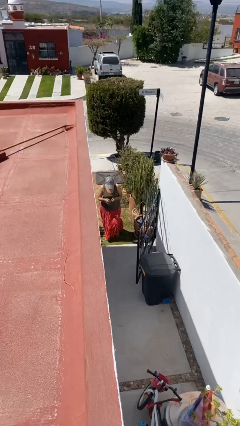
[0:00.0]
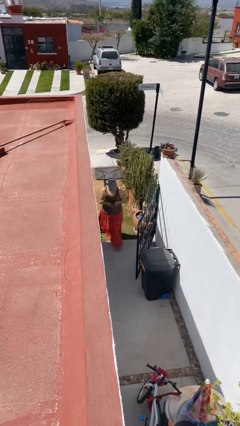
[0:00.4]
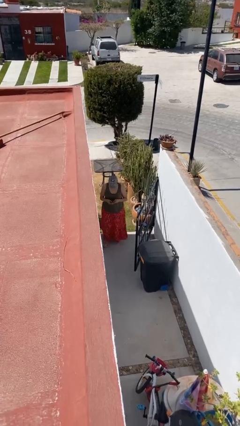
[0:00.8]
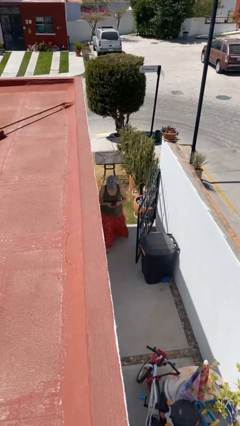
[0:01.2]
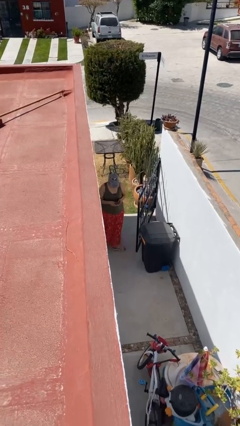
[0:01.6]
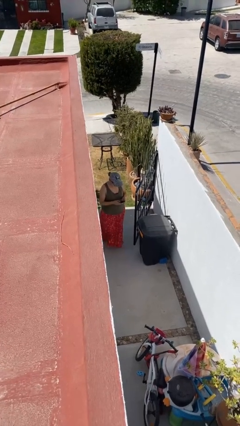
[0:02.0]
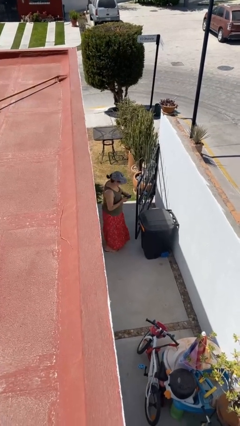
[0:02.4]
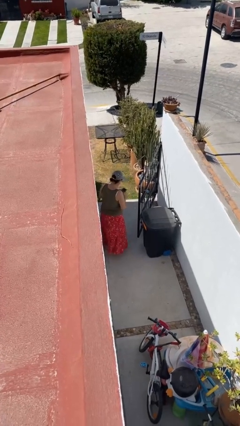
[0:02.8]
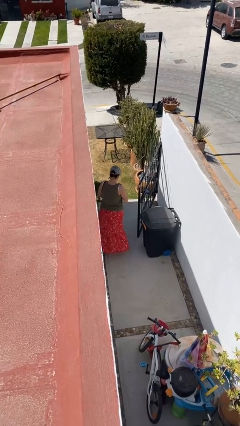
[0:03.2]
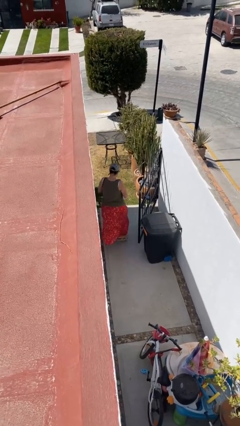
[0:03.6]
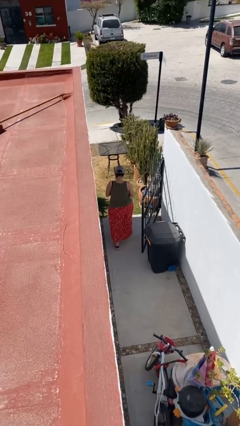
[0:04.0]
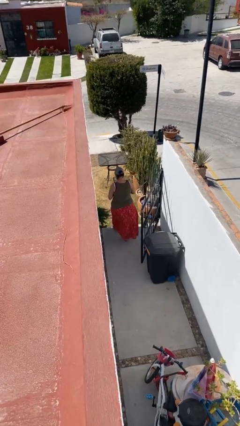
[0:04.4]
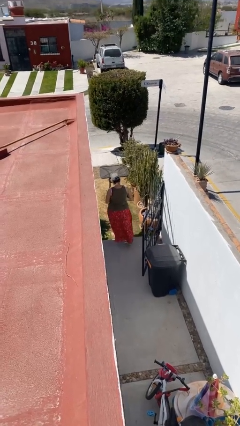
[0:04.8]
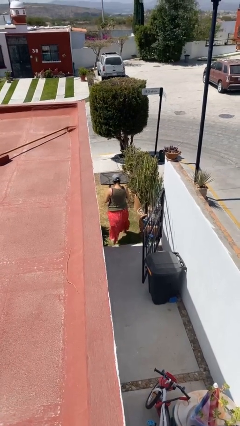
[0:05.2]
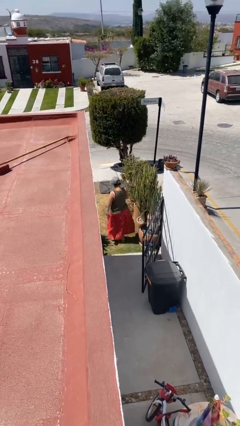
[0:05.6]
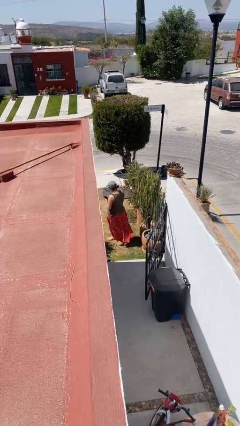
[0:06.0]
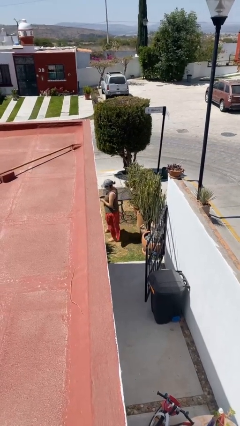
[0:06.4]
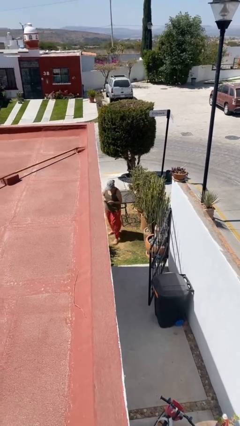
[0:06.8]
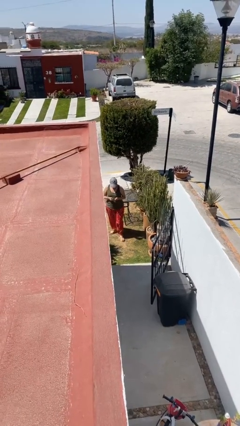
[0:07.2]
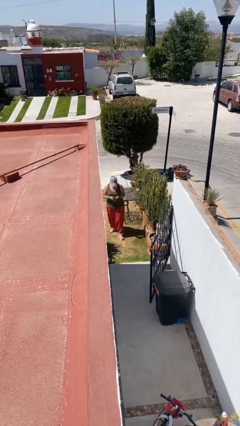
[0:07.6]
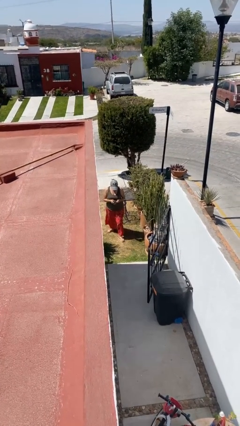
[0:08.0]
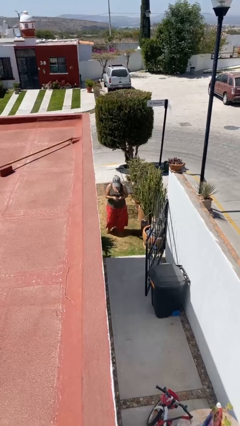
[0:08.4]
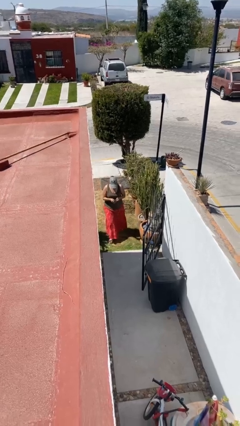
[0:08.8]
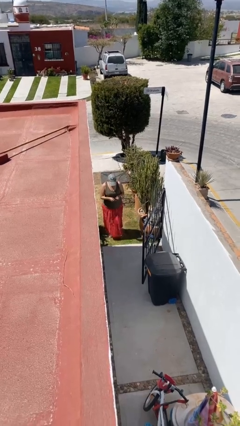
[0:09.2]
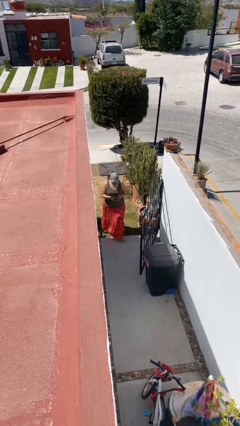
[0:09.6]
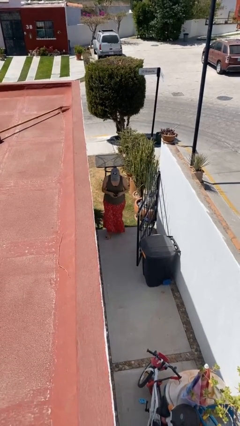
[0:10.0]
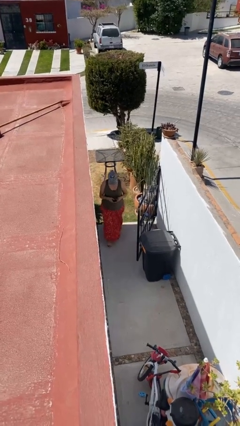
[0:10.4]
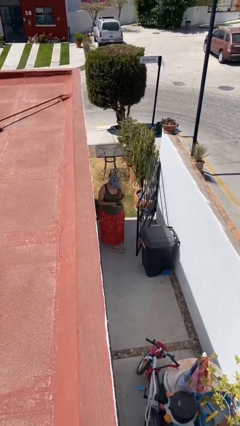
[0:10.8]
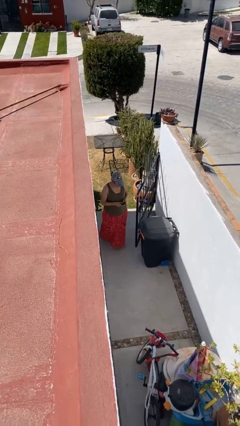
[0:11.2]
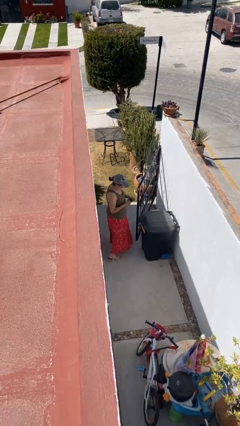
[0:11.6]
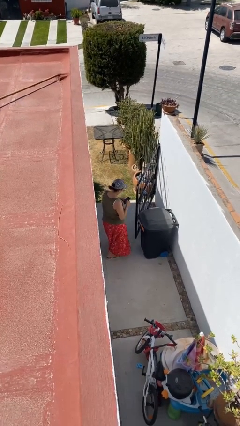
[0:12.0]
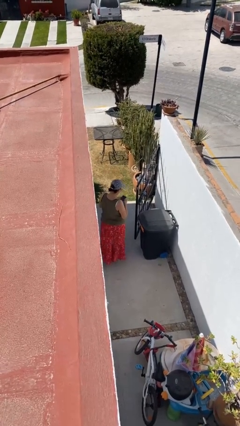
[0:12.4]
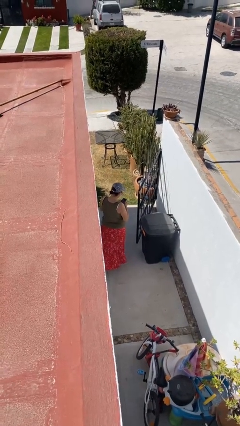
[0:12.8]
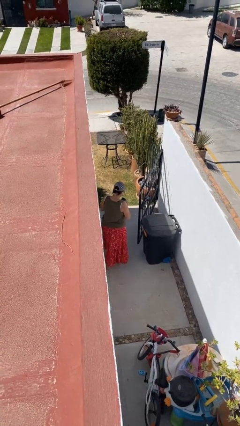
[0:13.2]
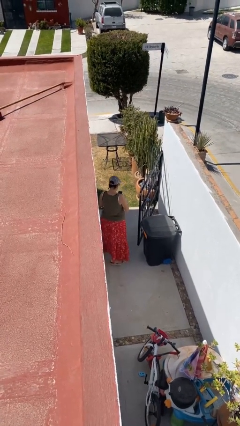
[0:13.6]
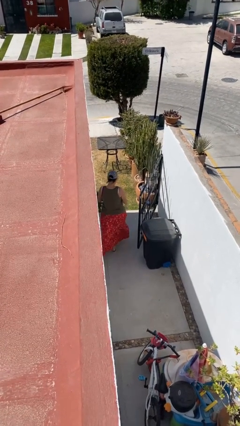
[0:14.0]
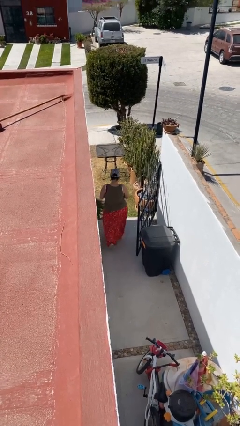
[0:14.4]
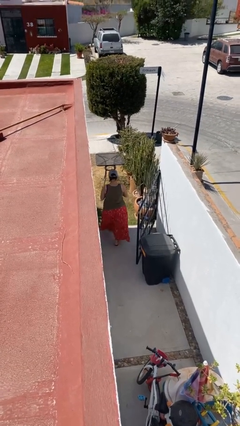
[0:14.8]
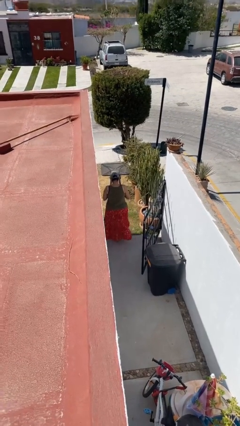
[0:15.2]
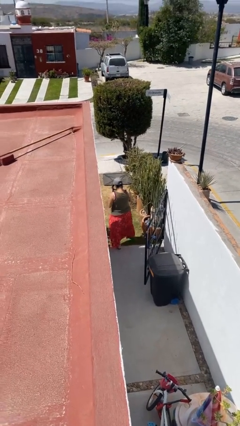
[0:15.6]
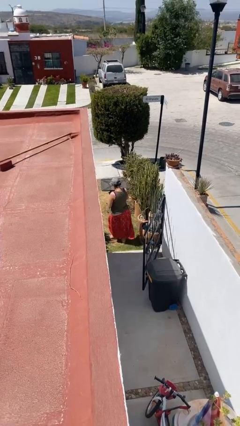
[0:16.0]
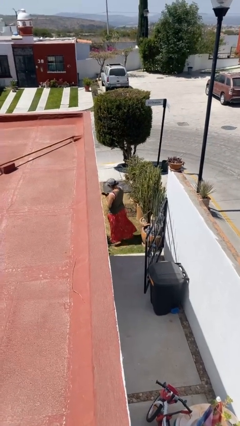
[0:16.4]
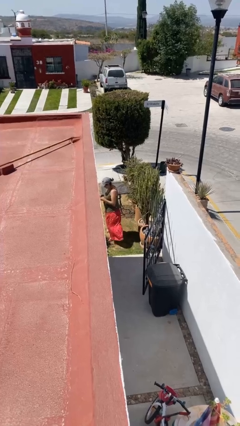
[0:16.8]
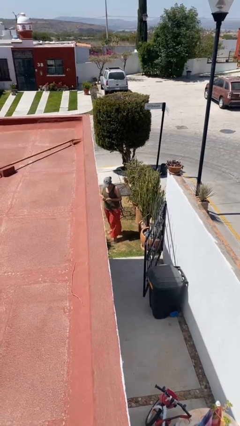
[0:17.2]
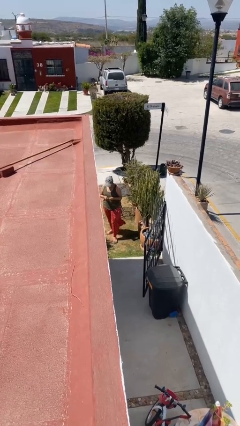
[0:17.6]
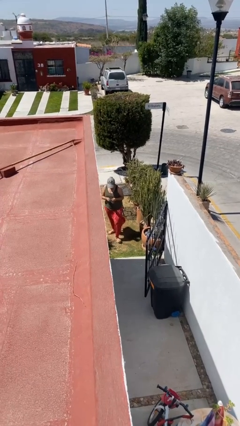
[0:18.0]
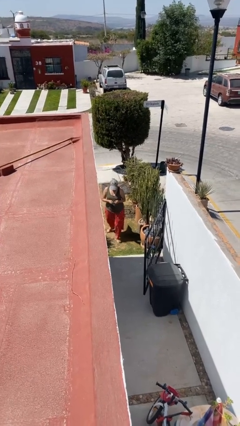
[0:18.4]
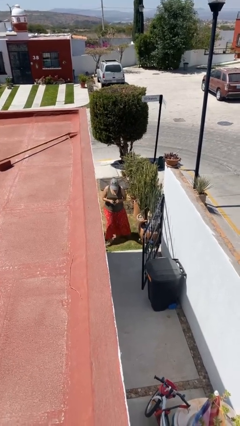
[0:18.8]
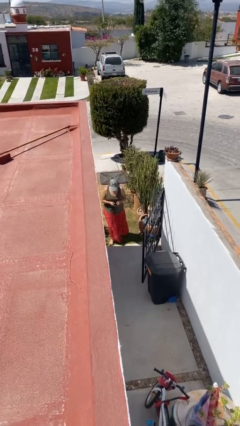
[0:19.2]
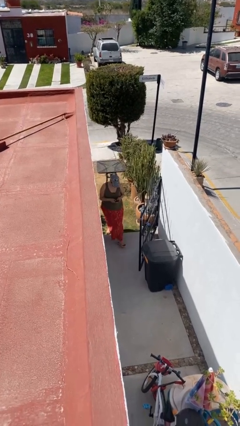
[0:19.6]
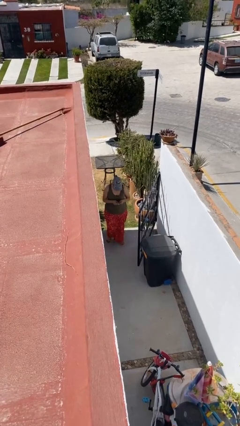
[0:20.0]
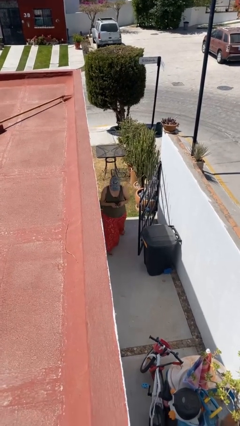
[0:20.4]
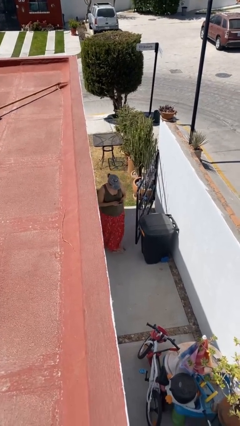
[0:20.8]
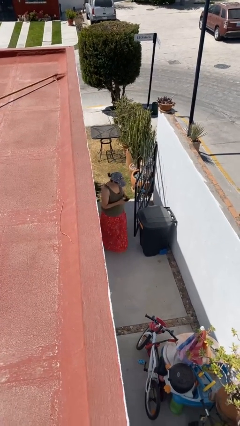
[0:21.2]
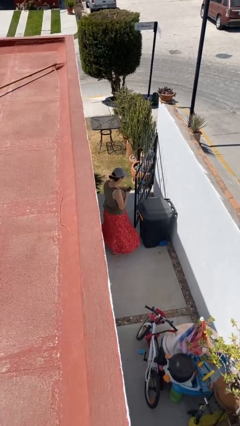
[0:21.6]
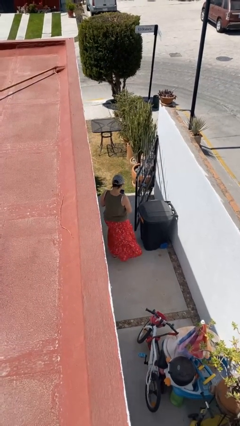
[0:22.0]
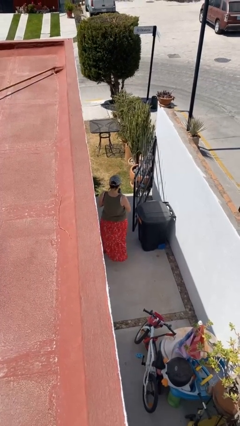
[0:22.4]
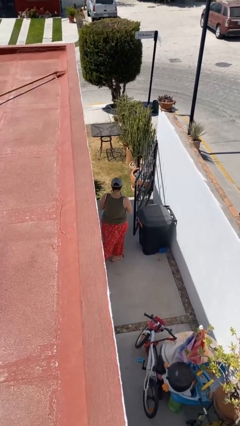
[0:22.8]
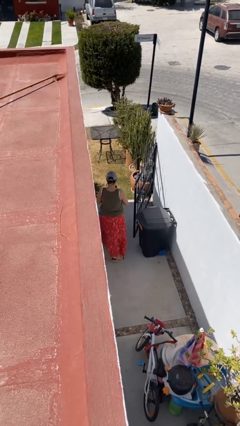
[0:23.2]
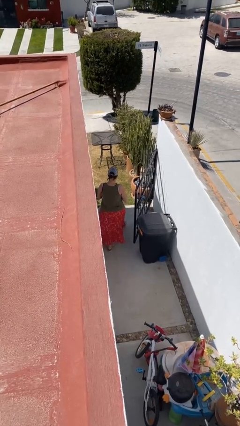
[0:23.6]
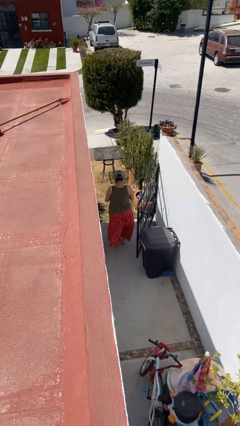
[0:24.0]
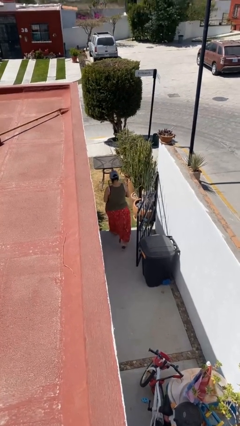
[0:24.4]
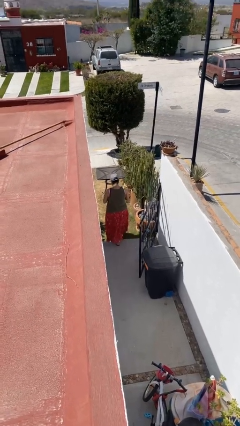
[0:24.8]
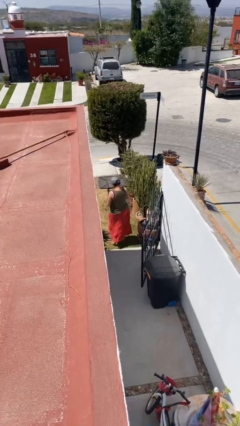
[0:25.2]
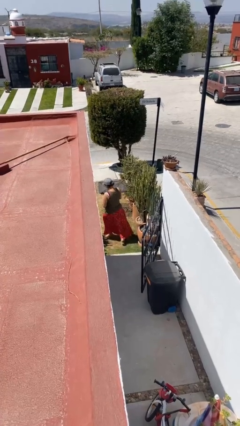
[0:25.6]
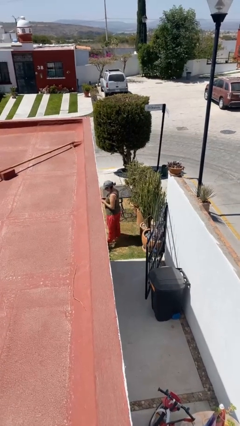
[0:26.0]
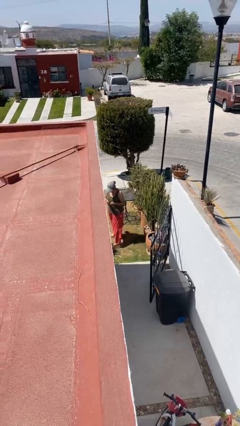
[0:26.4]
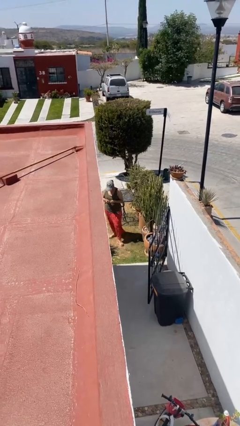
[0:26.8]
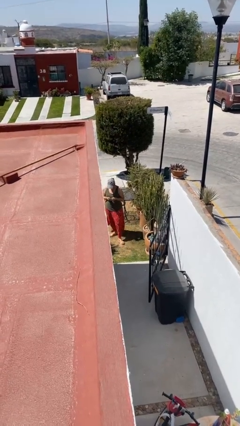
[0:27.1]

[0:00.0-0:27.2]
person texts on phone

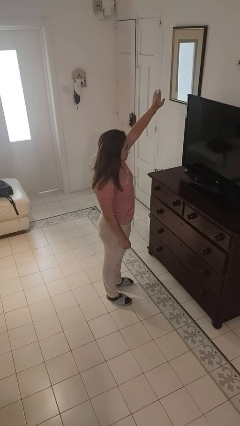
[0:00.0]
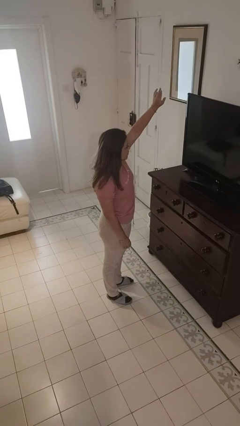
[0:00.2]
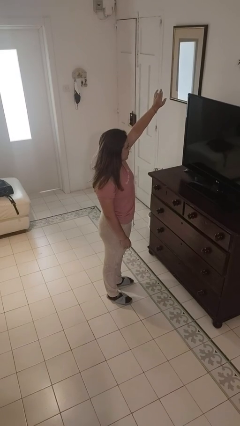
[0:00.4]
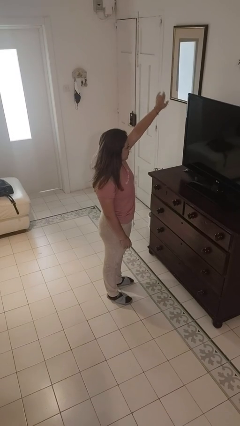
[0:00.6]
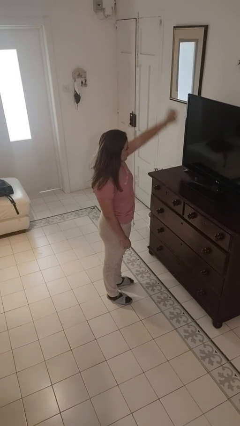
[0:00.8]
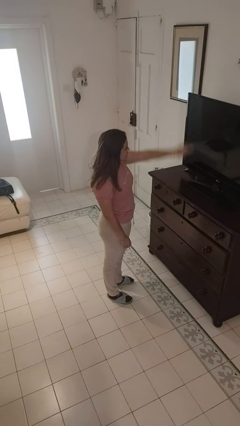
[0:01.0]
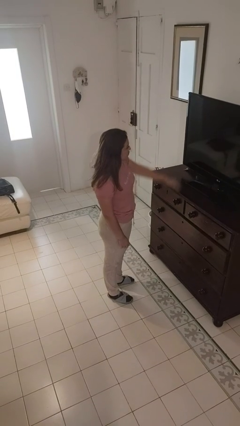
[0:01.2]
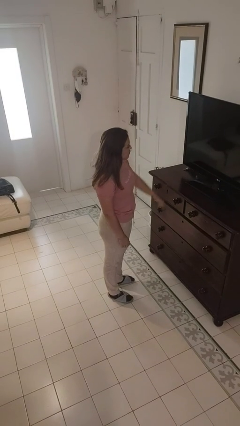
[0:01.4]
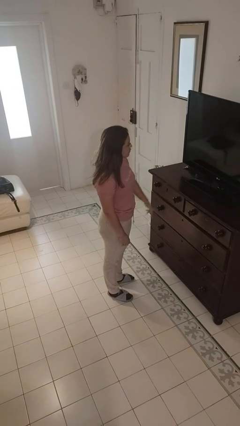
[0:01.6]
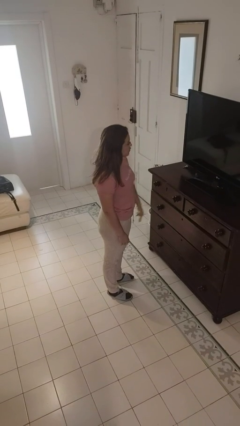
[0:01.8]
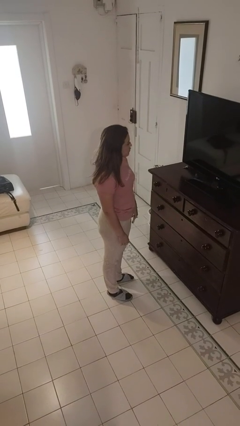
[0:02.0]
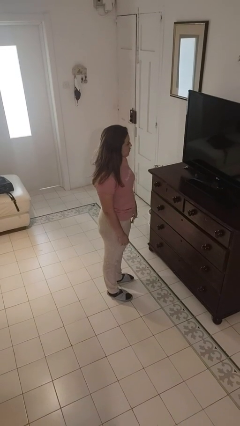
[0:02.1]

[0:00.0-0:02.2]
person gestures swipe down

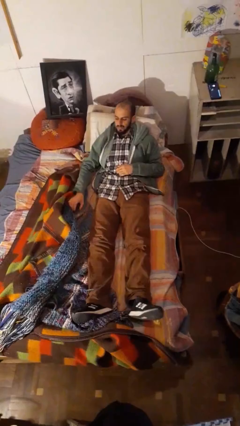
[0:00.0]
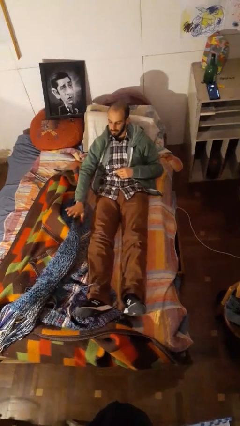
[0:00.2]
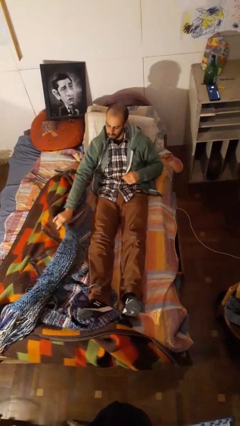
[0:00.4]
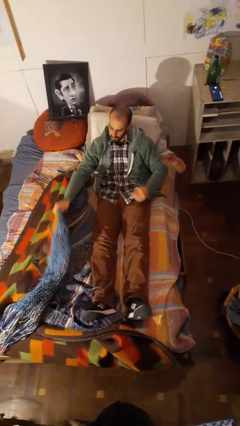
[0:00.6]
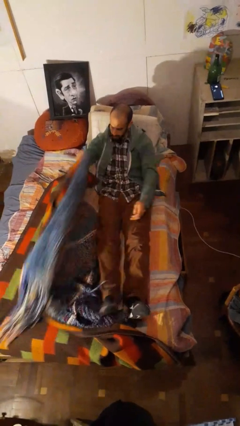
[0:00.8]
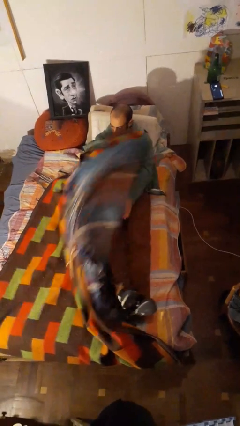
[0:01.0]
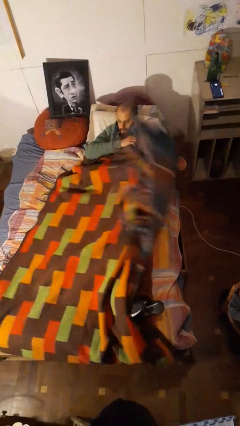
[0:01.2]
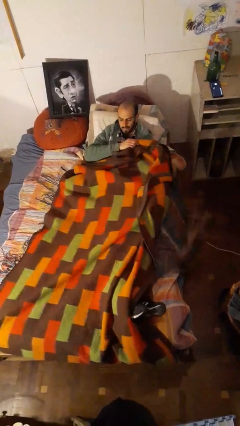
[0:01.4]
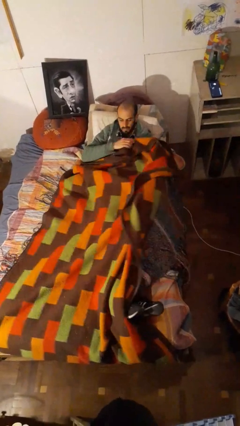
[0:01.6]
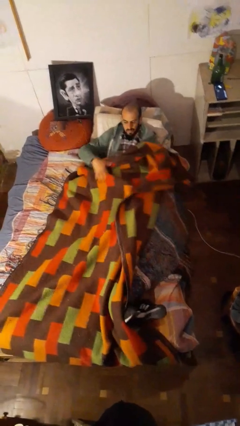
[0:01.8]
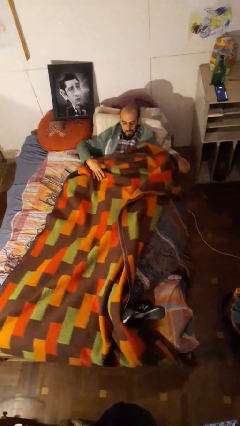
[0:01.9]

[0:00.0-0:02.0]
person covers with bedsheets

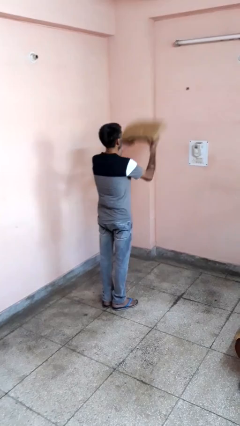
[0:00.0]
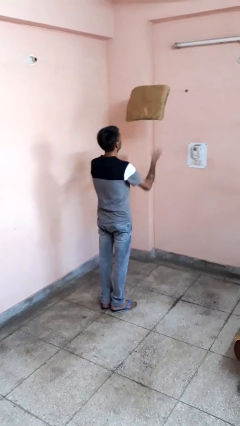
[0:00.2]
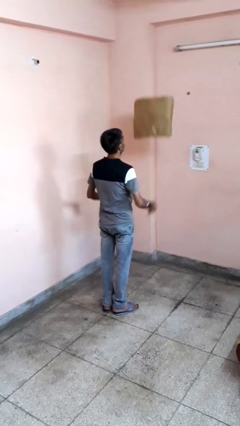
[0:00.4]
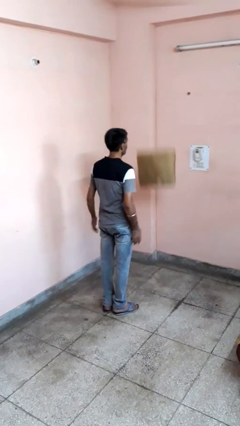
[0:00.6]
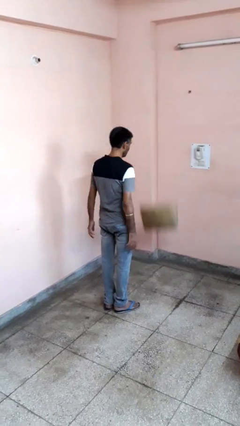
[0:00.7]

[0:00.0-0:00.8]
person throws object into air
